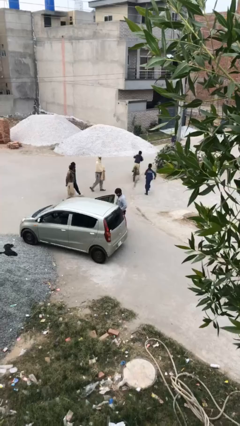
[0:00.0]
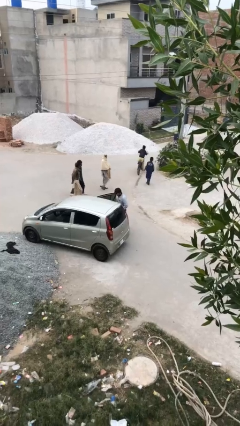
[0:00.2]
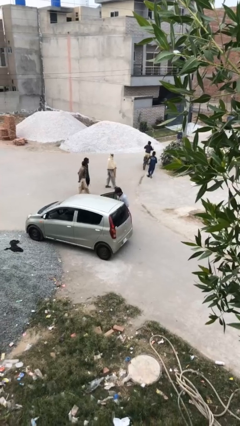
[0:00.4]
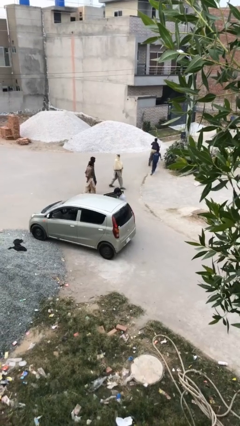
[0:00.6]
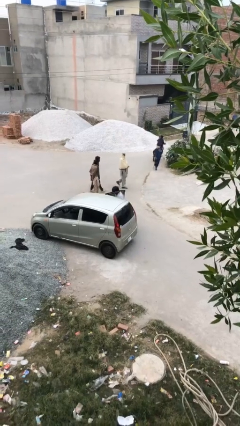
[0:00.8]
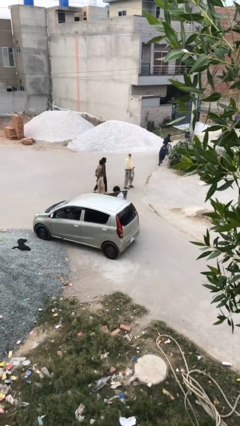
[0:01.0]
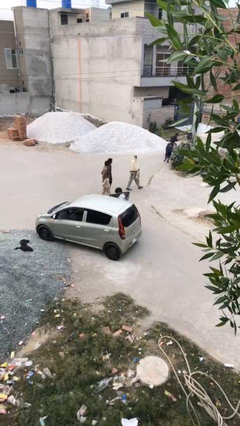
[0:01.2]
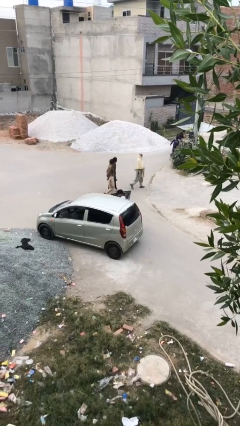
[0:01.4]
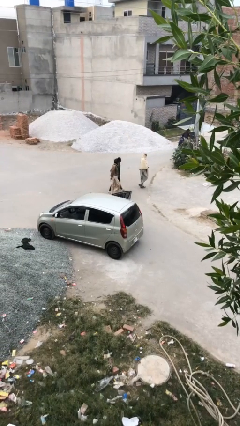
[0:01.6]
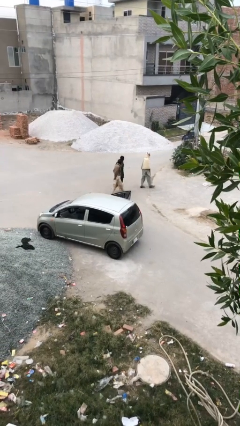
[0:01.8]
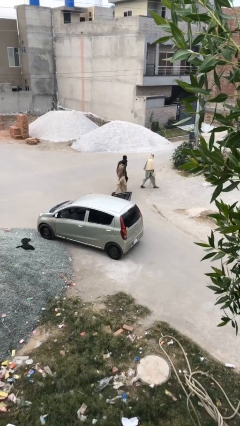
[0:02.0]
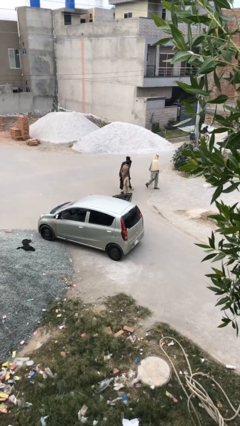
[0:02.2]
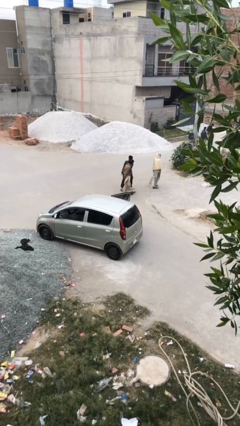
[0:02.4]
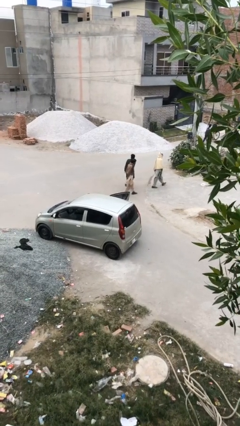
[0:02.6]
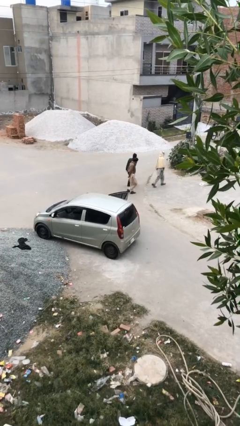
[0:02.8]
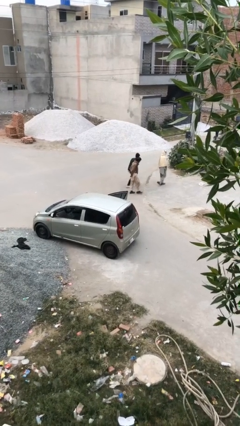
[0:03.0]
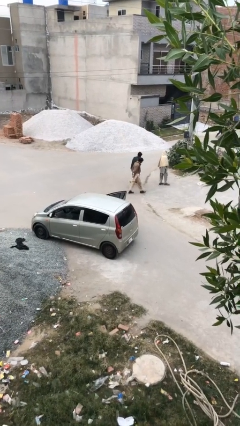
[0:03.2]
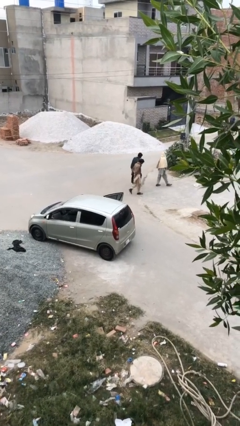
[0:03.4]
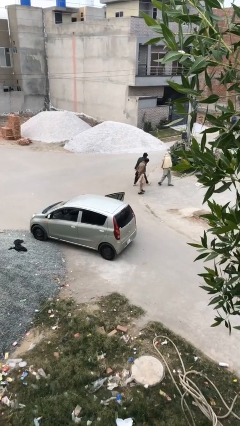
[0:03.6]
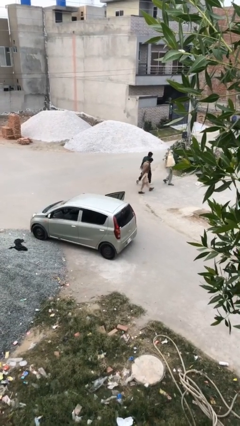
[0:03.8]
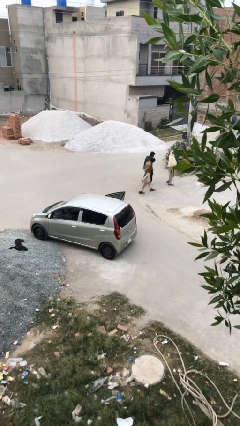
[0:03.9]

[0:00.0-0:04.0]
person enters car

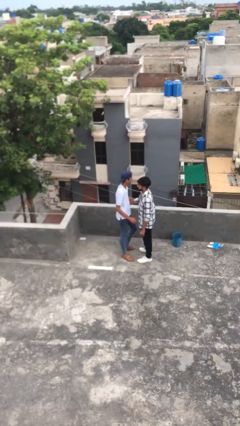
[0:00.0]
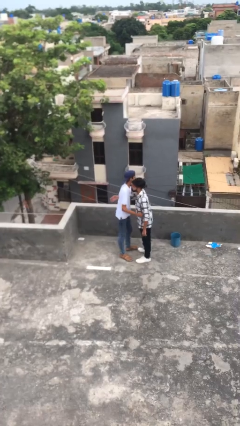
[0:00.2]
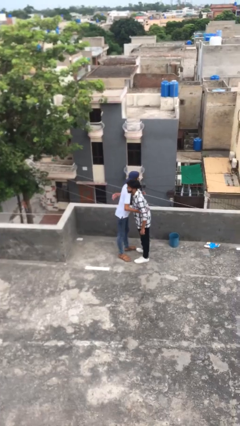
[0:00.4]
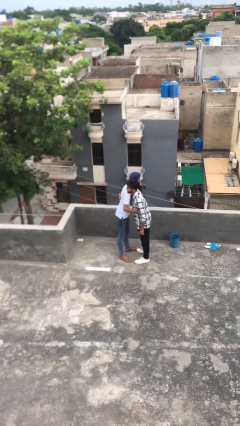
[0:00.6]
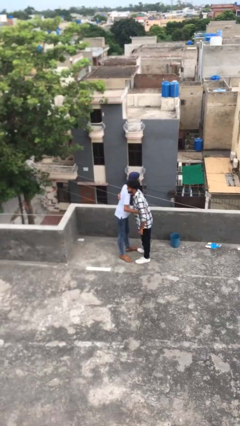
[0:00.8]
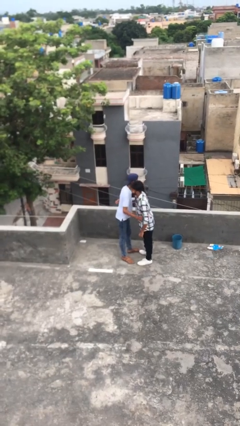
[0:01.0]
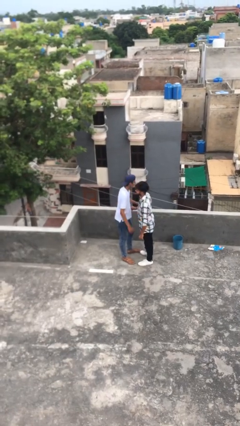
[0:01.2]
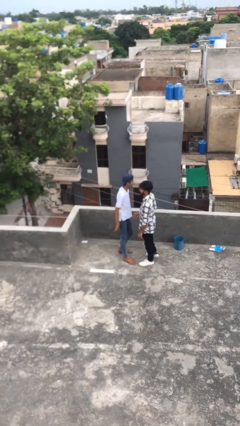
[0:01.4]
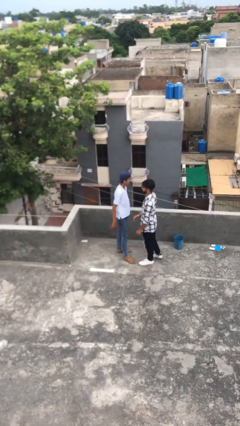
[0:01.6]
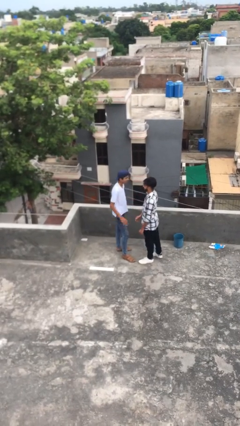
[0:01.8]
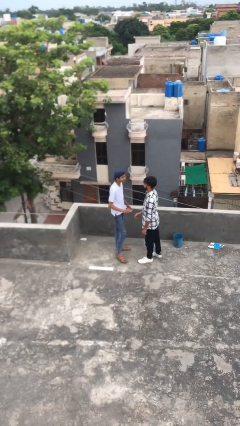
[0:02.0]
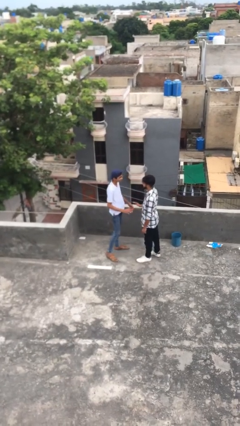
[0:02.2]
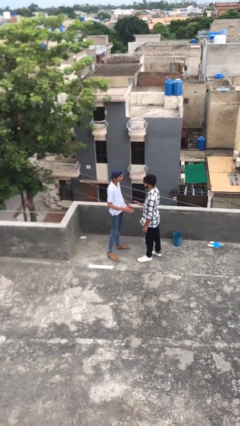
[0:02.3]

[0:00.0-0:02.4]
person embraces person

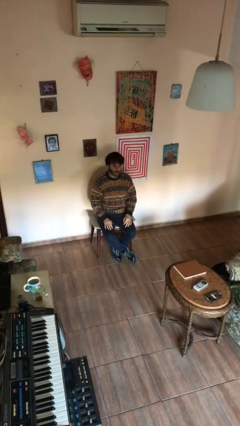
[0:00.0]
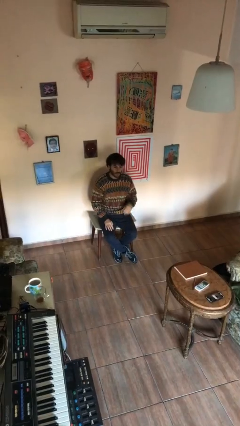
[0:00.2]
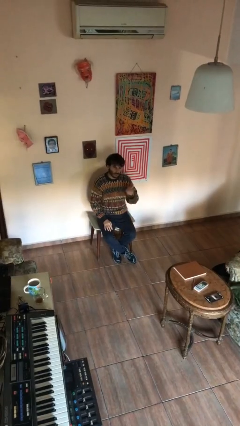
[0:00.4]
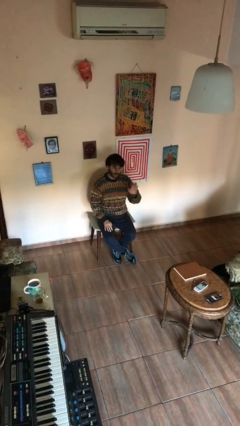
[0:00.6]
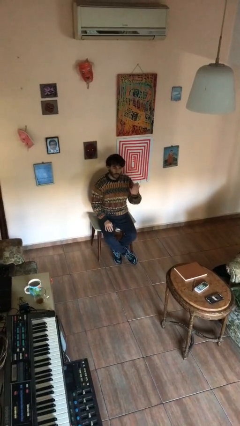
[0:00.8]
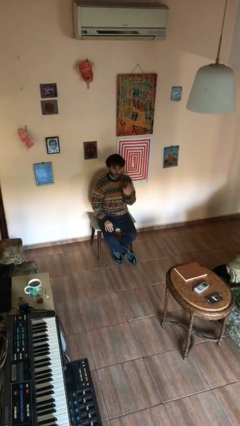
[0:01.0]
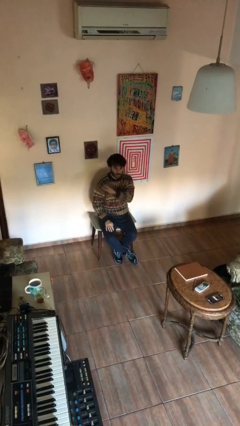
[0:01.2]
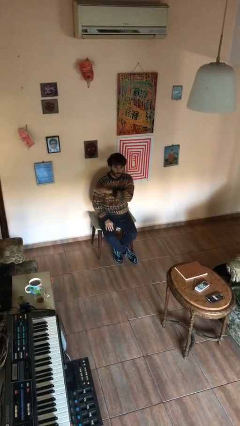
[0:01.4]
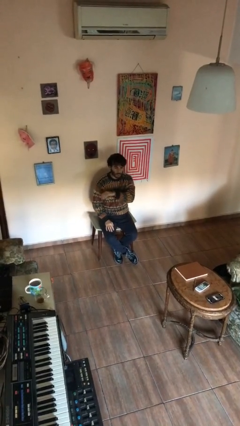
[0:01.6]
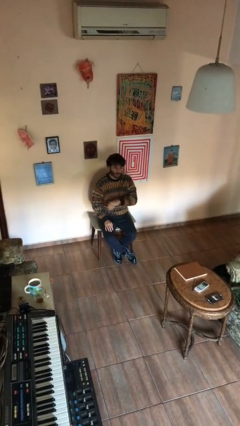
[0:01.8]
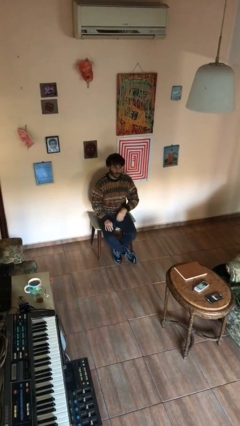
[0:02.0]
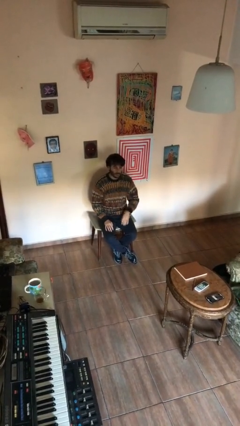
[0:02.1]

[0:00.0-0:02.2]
person gestures swipe right

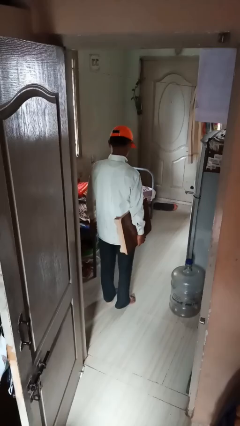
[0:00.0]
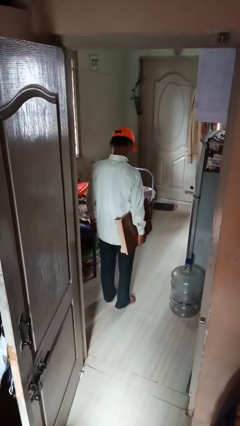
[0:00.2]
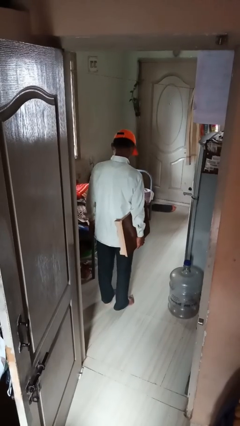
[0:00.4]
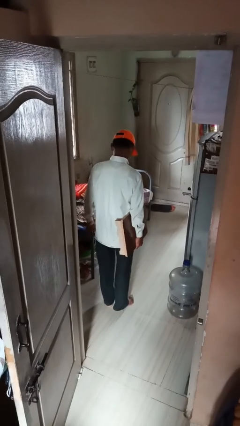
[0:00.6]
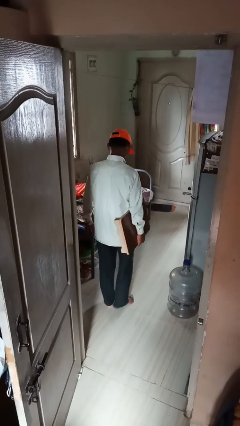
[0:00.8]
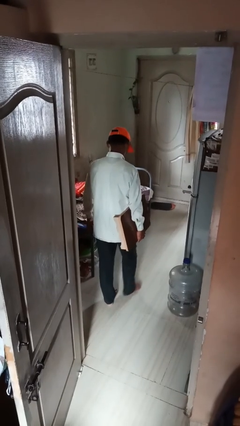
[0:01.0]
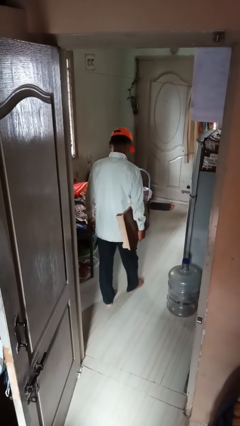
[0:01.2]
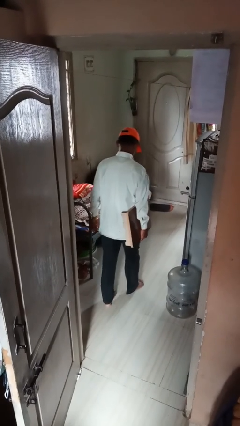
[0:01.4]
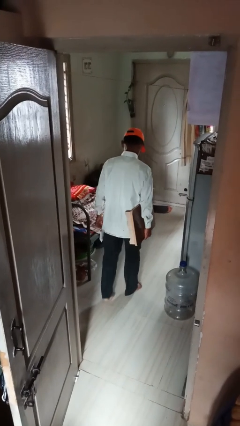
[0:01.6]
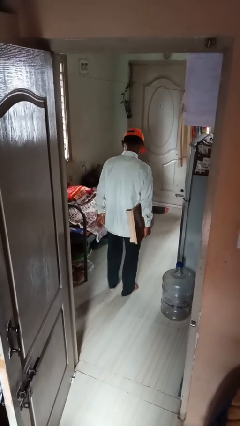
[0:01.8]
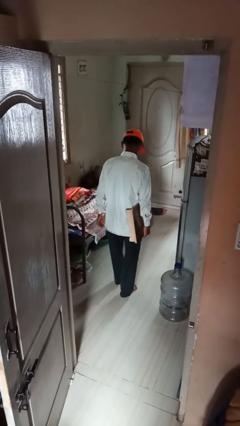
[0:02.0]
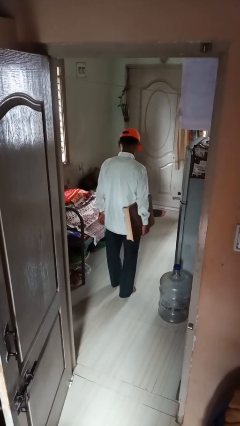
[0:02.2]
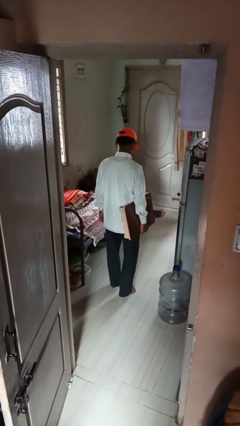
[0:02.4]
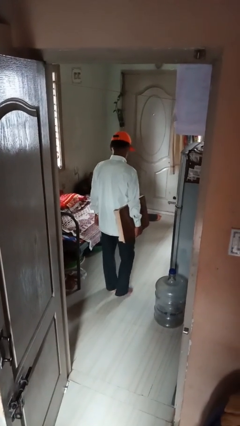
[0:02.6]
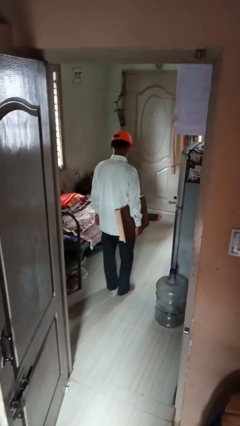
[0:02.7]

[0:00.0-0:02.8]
person carries furniture

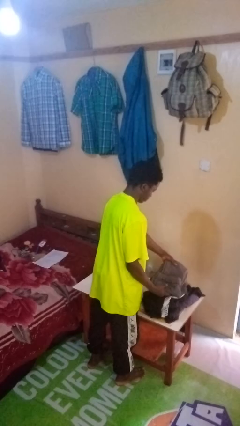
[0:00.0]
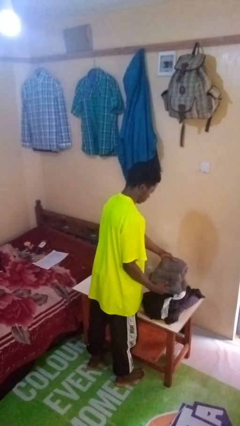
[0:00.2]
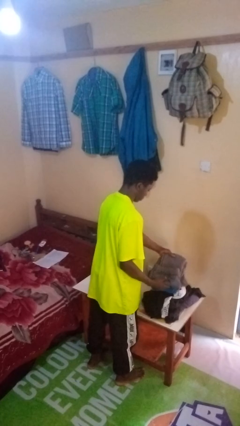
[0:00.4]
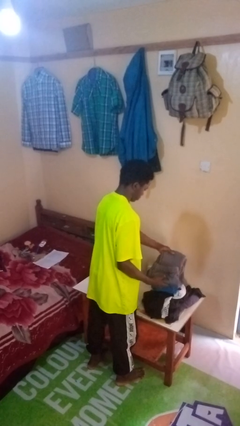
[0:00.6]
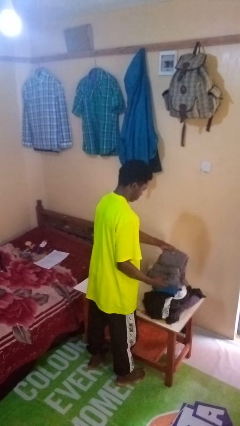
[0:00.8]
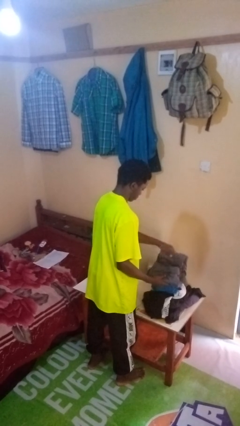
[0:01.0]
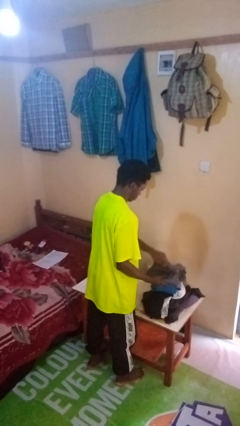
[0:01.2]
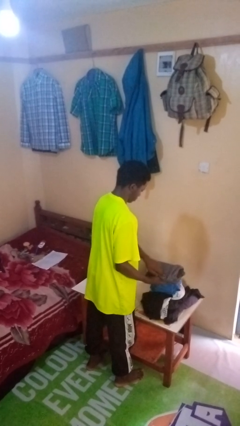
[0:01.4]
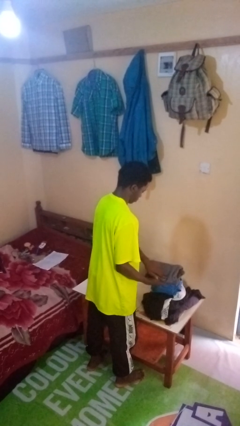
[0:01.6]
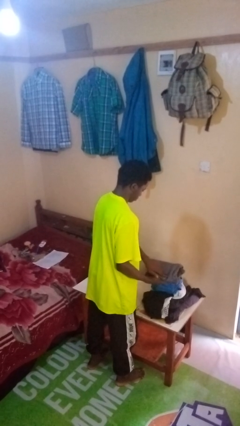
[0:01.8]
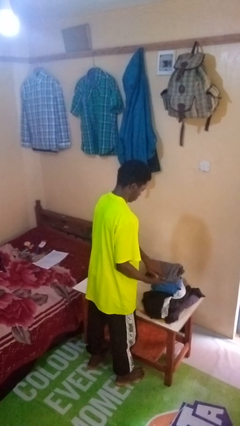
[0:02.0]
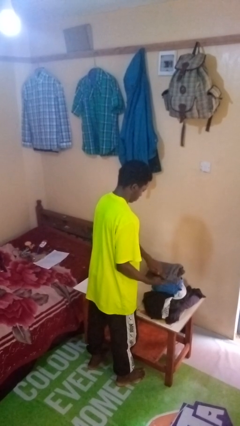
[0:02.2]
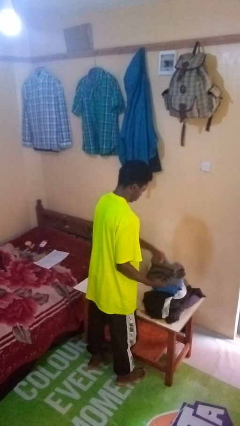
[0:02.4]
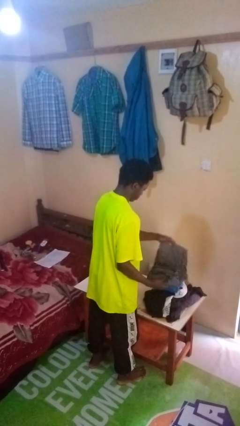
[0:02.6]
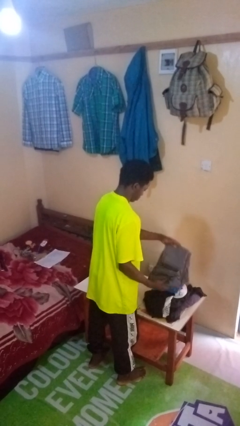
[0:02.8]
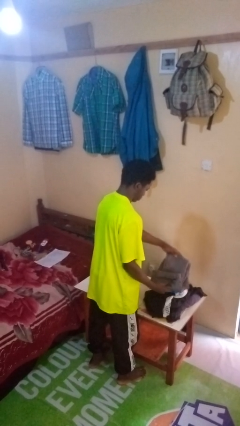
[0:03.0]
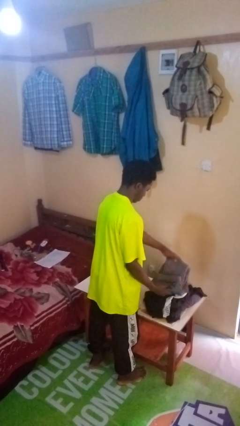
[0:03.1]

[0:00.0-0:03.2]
person folds pants

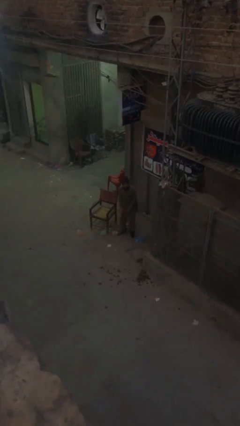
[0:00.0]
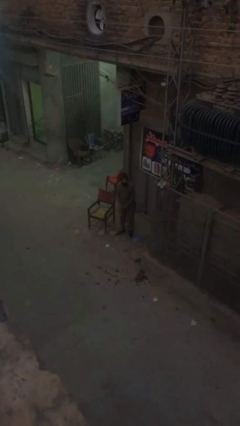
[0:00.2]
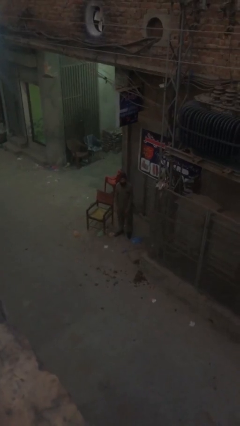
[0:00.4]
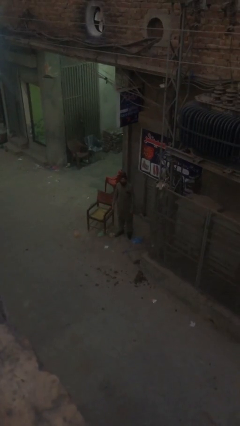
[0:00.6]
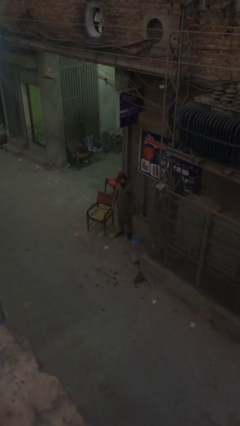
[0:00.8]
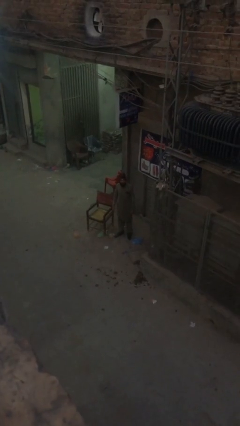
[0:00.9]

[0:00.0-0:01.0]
person stands up

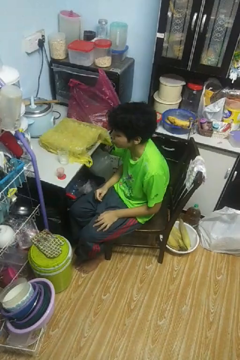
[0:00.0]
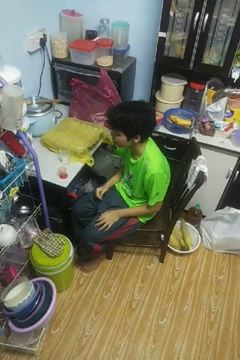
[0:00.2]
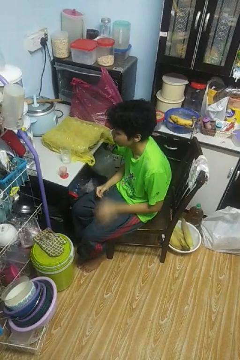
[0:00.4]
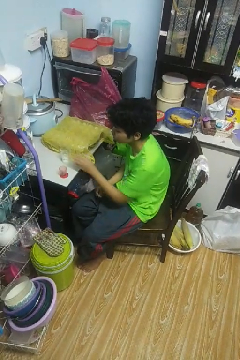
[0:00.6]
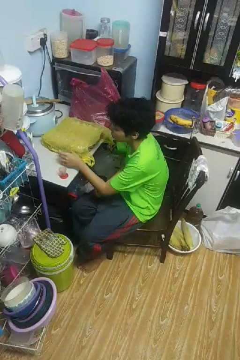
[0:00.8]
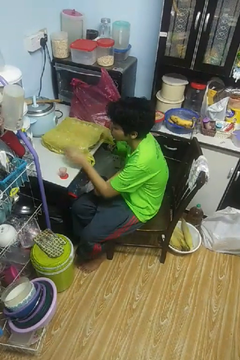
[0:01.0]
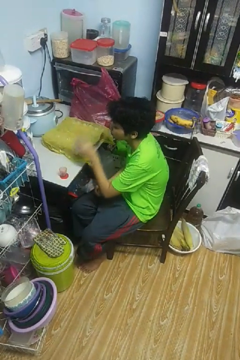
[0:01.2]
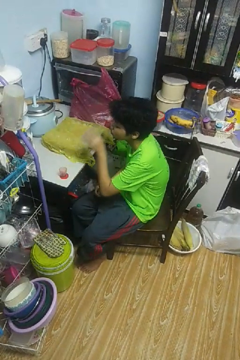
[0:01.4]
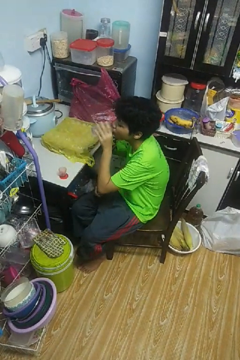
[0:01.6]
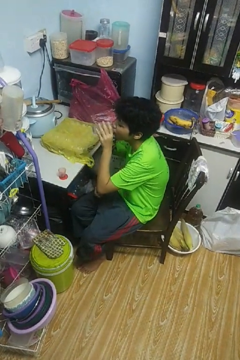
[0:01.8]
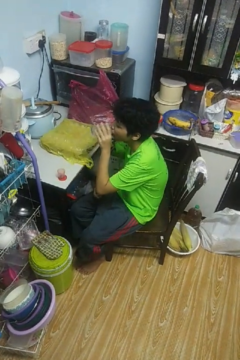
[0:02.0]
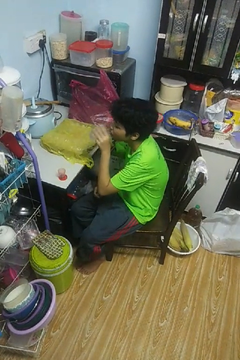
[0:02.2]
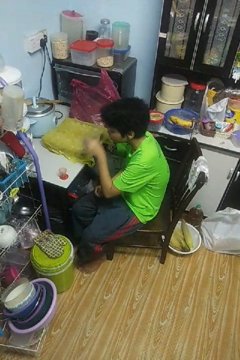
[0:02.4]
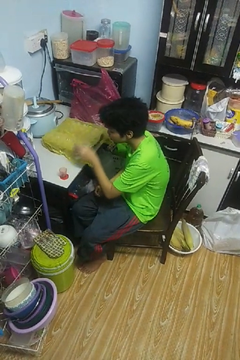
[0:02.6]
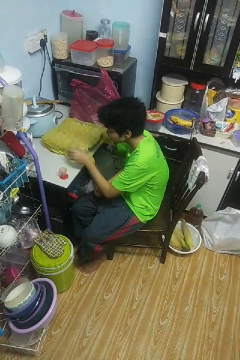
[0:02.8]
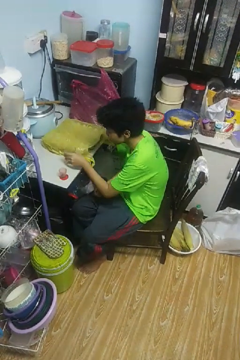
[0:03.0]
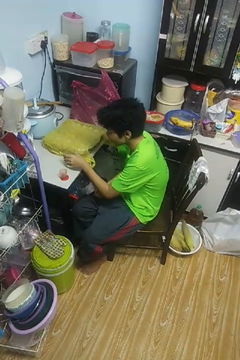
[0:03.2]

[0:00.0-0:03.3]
person drinks from cup
